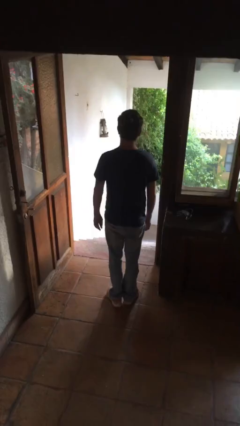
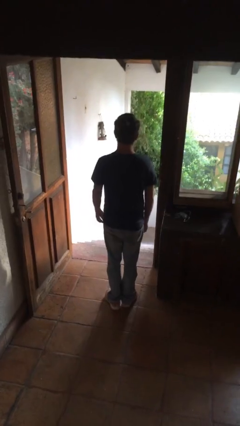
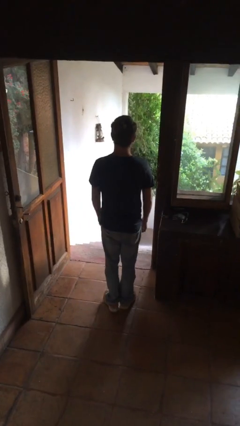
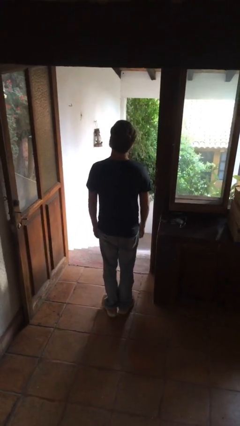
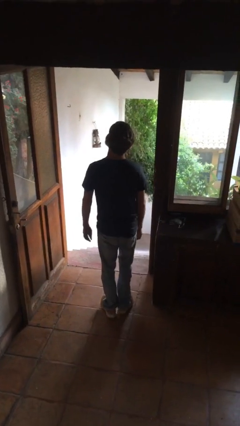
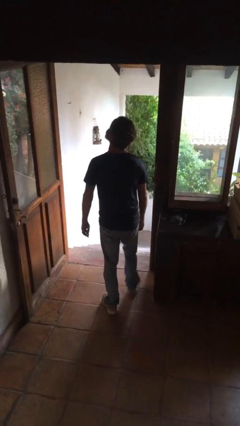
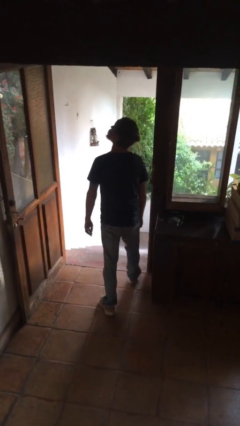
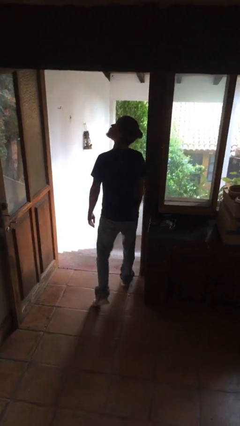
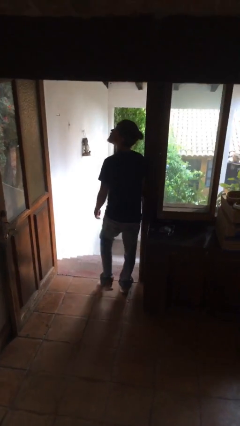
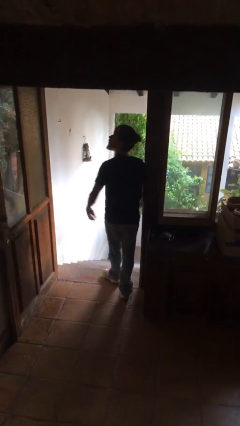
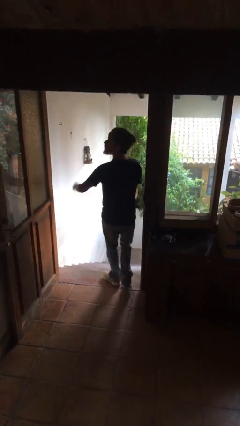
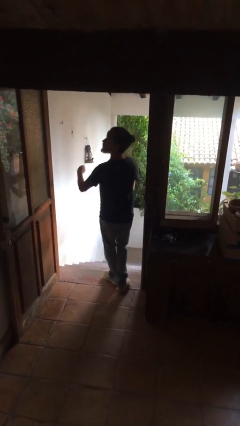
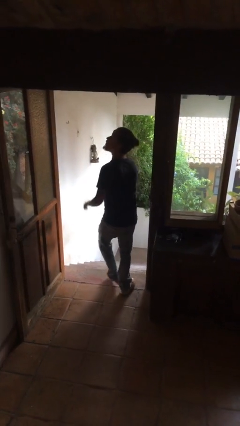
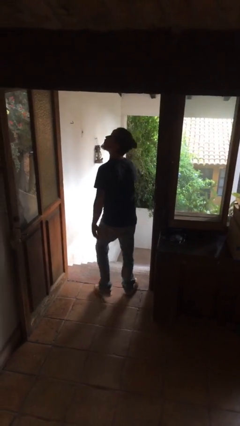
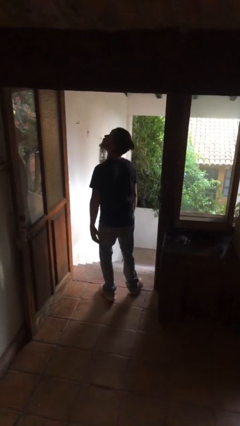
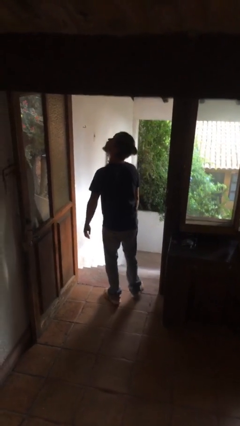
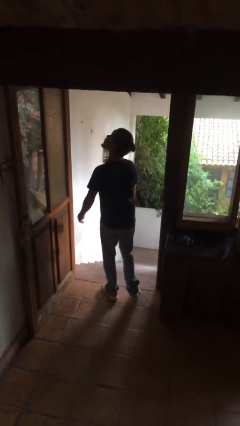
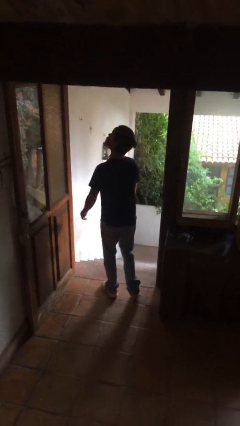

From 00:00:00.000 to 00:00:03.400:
person bumps into wall

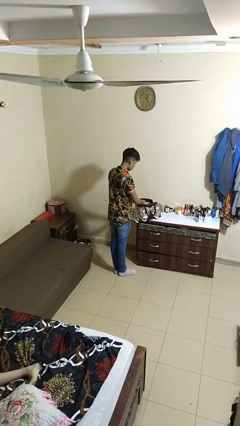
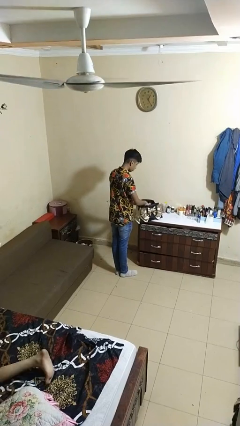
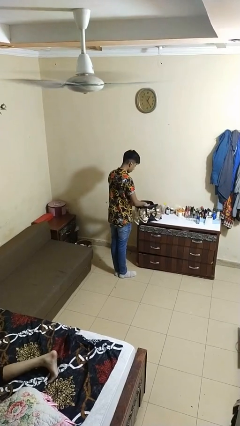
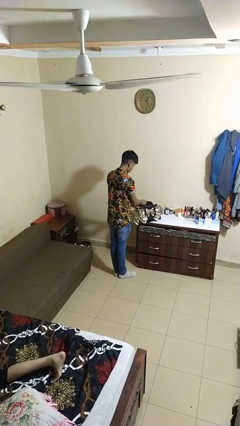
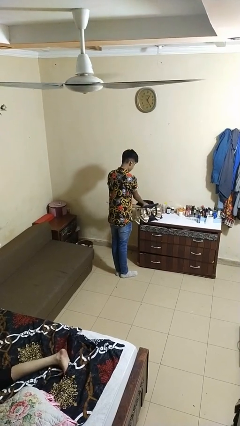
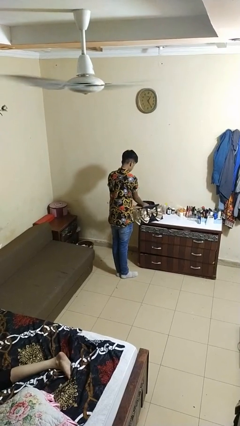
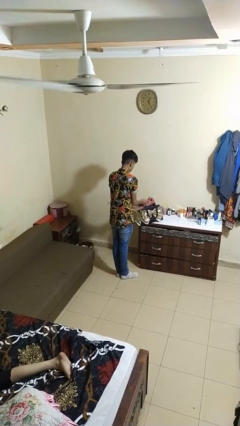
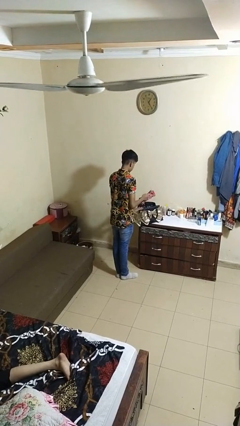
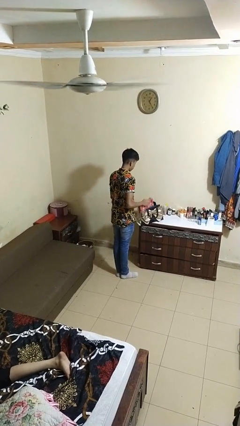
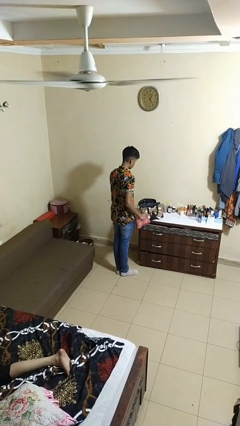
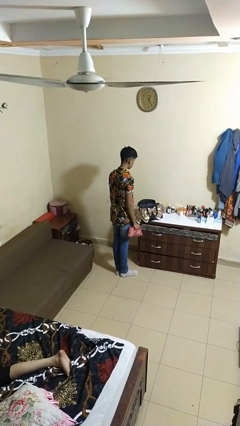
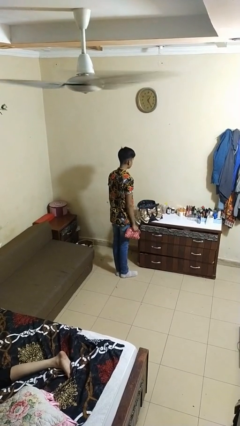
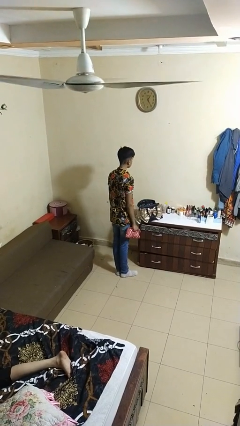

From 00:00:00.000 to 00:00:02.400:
person takes object from purse

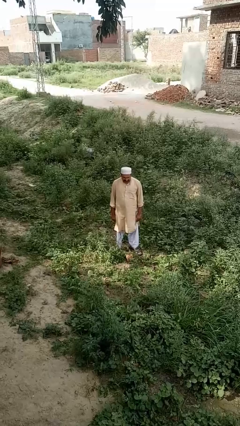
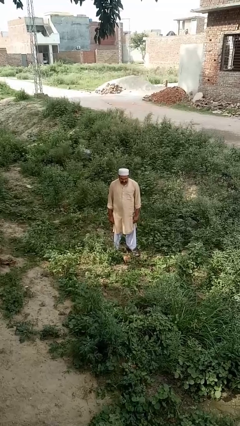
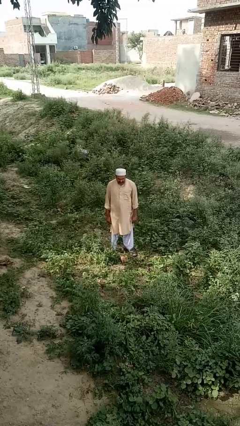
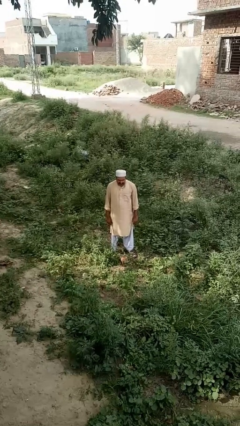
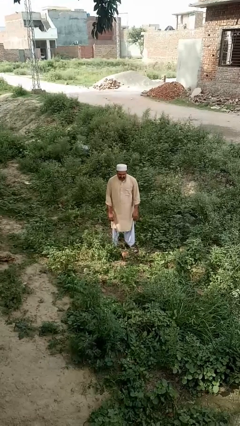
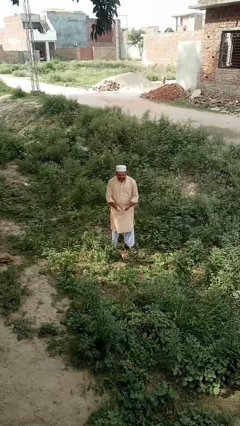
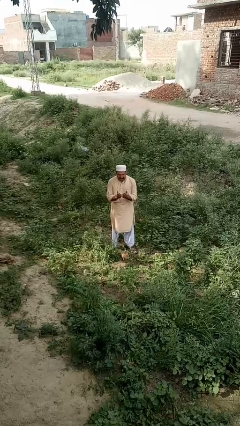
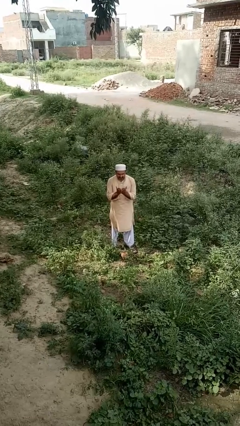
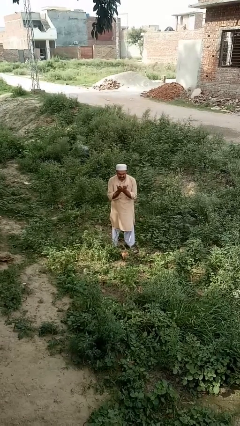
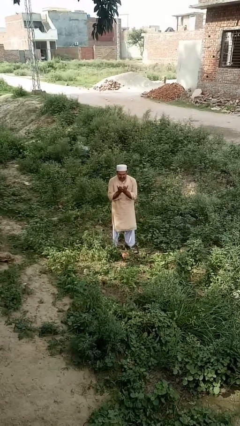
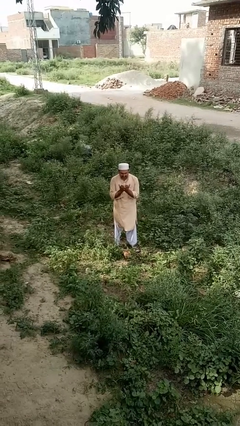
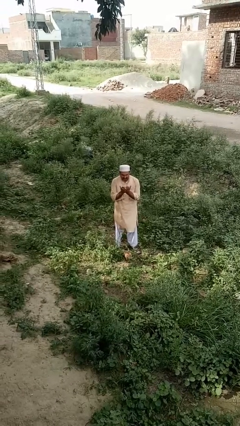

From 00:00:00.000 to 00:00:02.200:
person prays

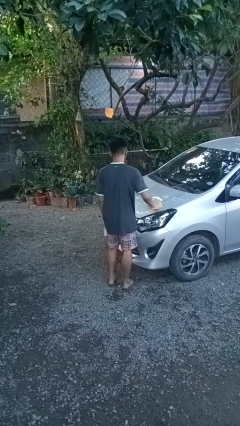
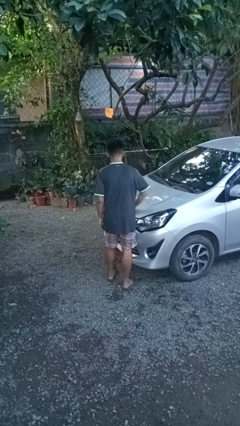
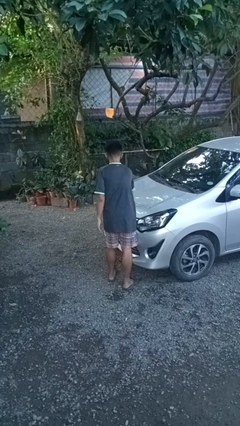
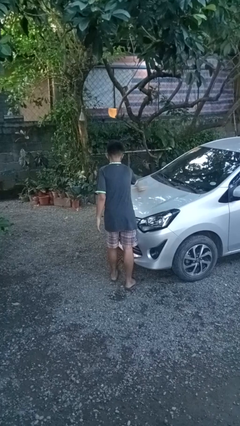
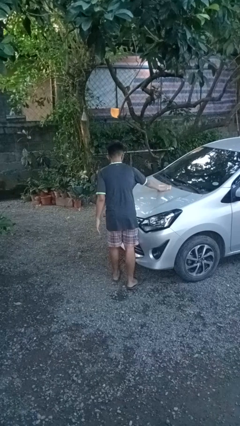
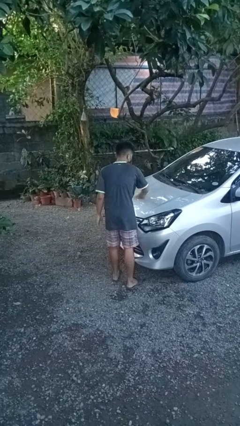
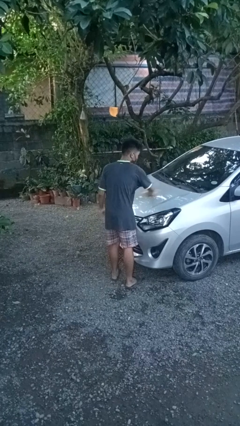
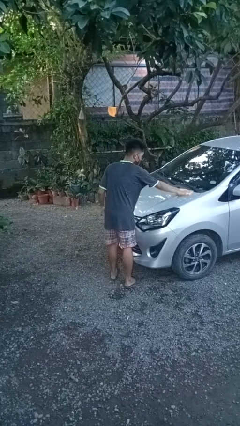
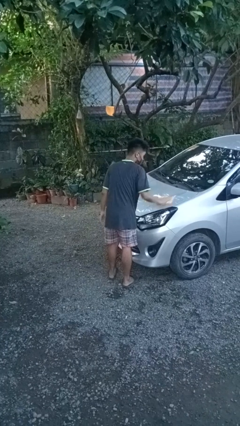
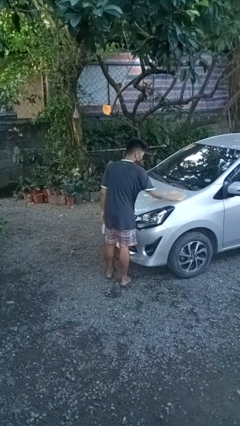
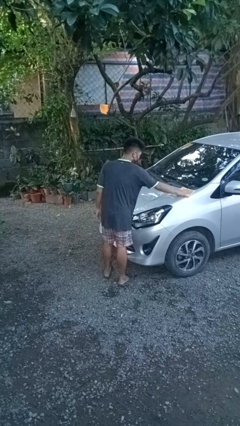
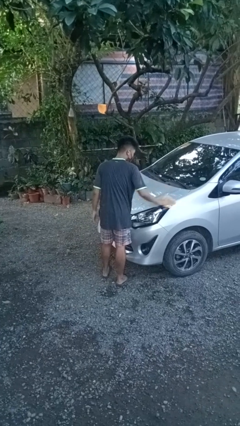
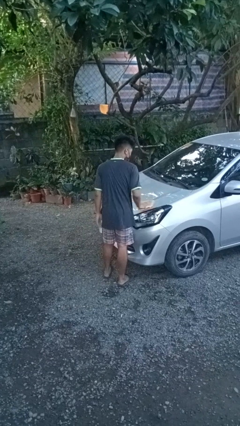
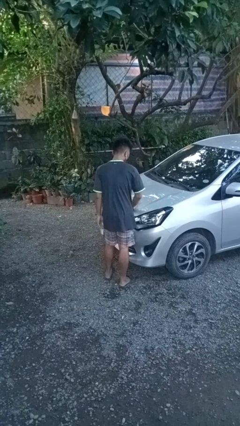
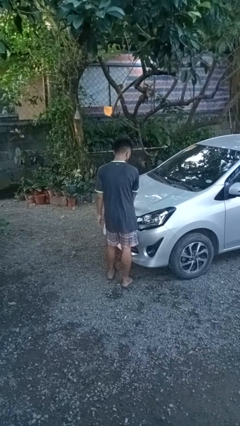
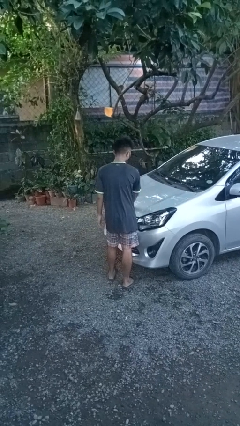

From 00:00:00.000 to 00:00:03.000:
person polishes car with rag

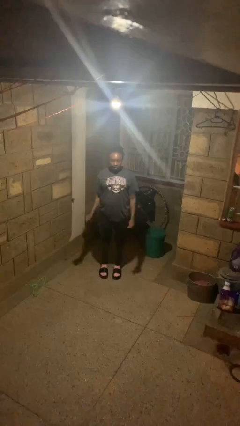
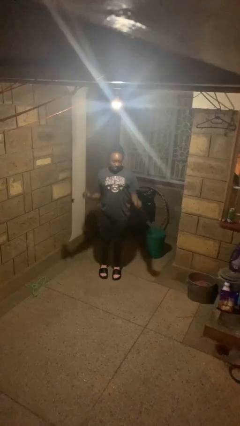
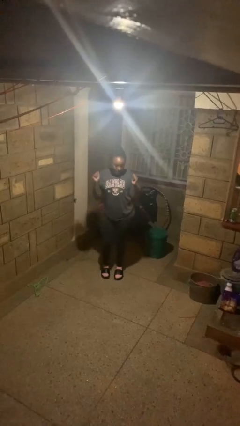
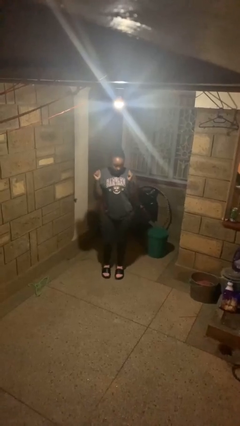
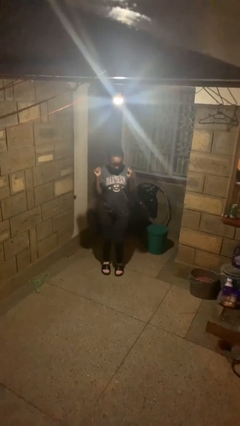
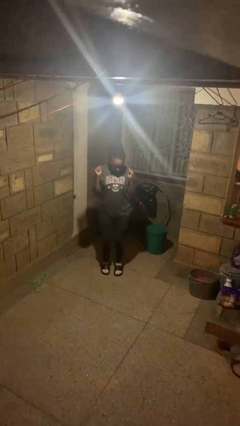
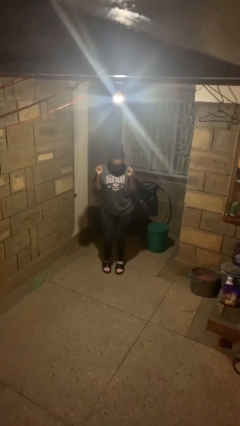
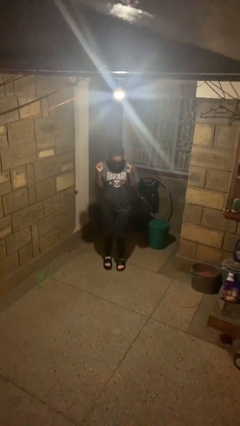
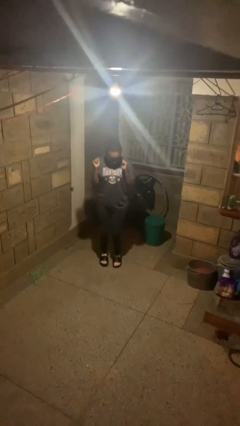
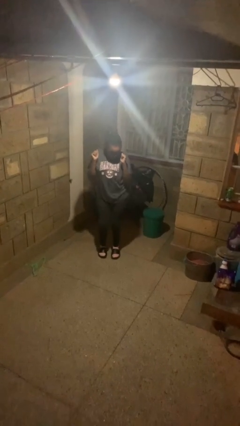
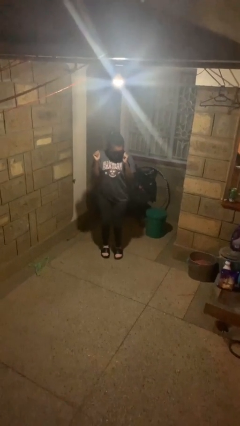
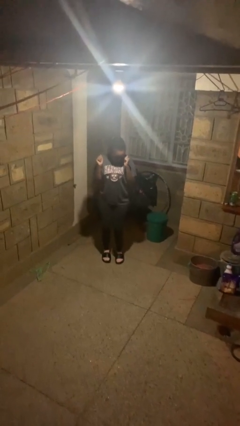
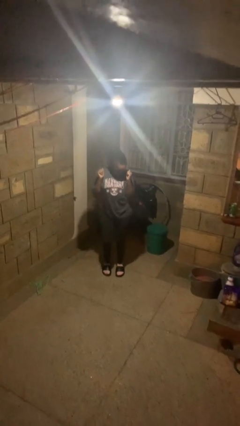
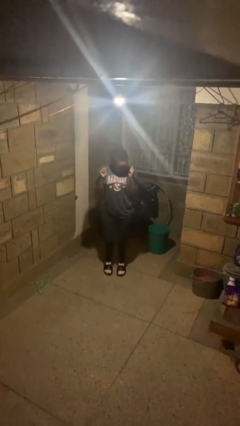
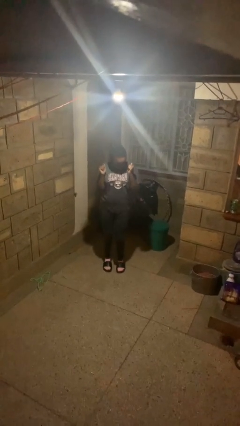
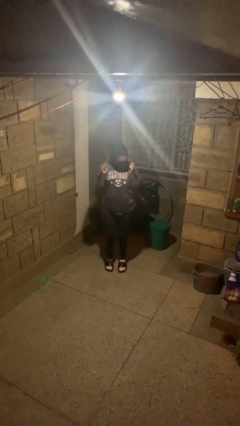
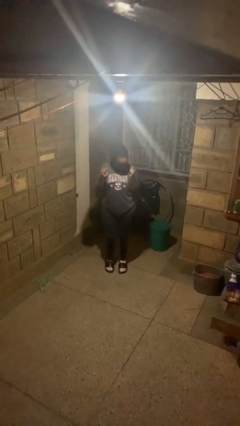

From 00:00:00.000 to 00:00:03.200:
person wiggles hips

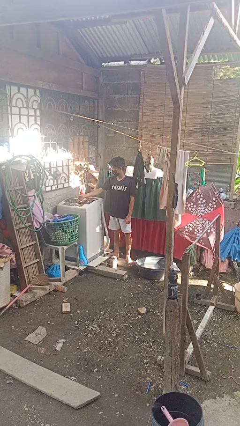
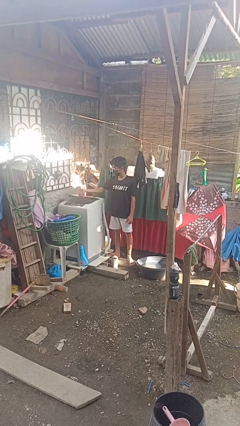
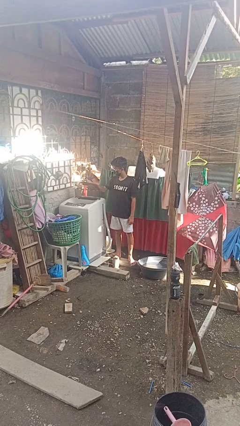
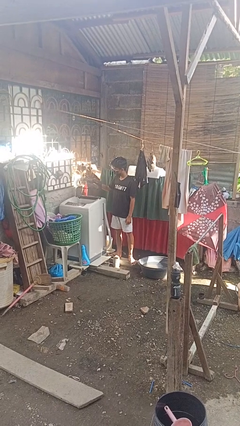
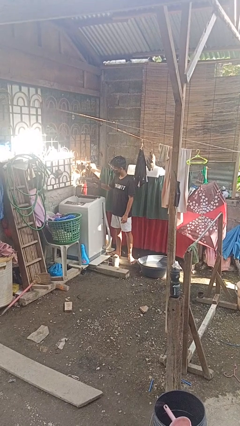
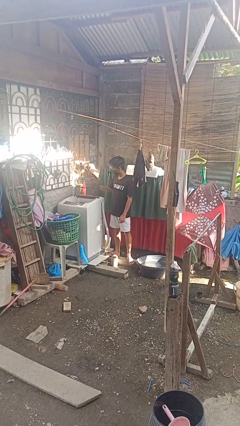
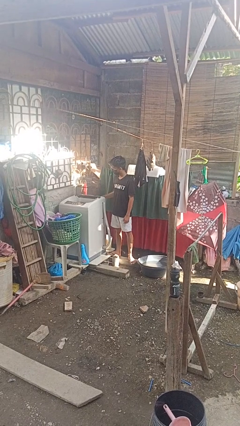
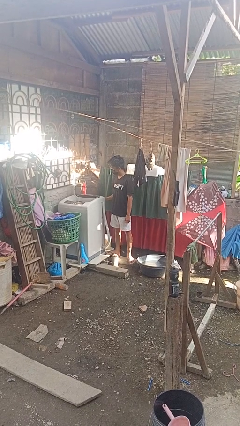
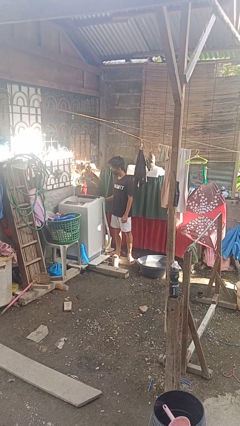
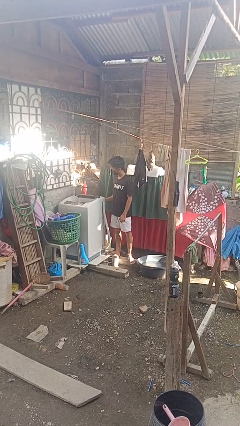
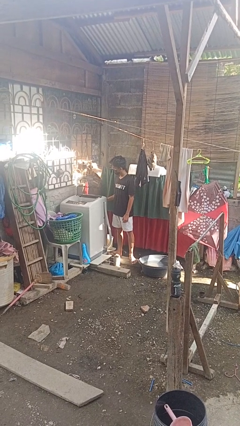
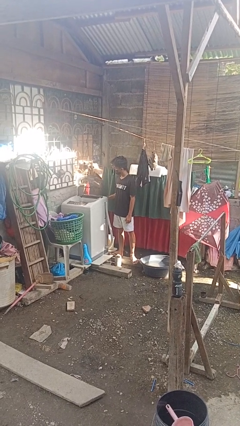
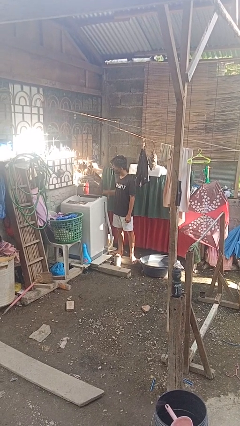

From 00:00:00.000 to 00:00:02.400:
person opens clothes washer

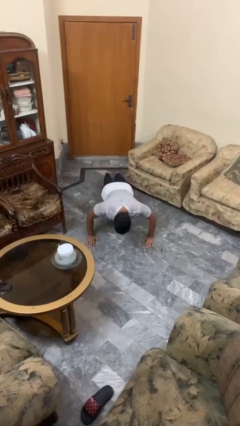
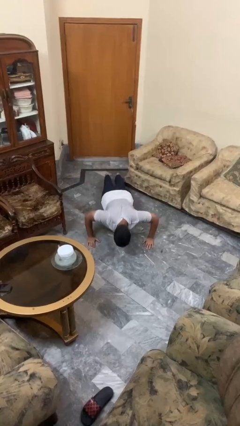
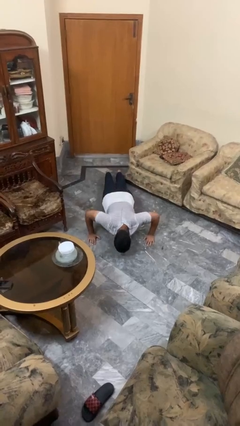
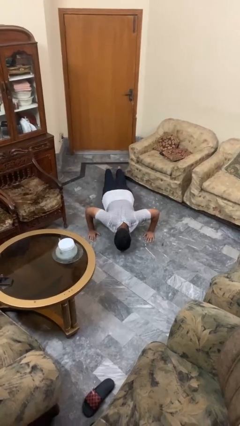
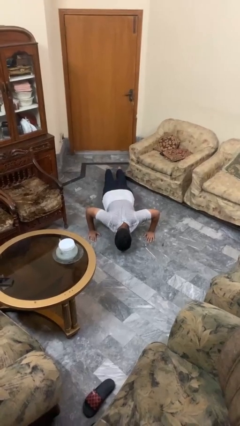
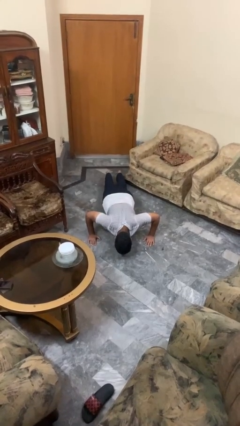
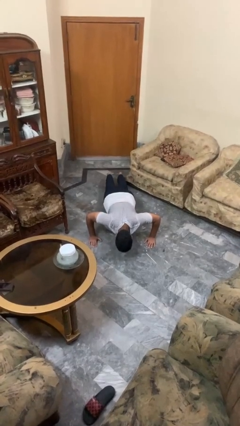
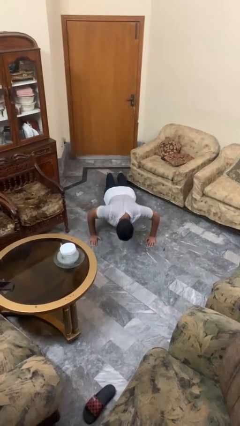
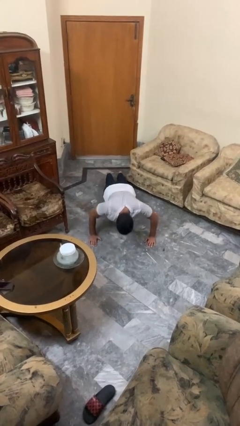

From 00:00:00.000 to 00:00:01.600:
person exercises with pushup
